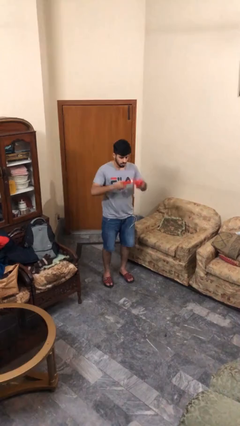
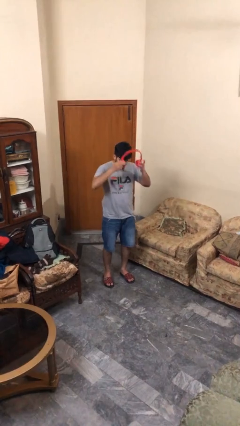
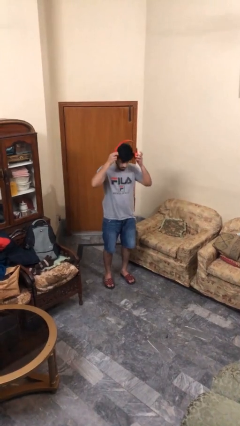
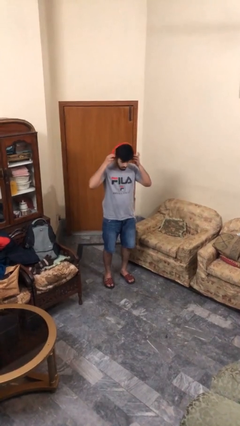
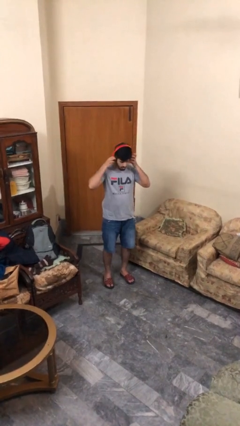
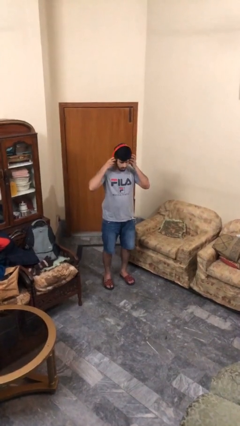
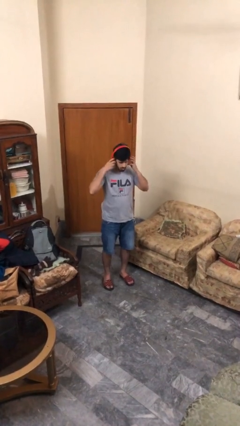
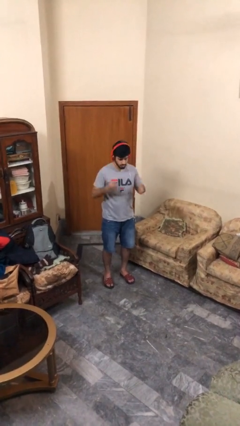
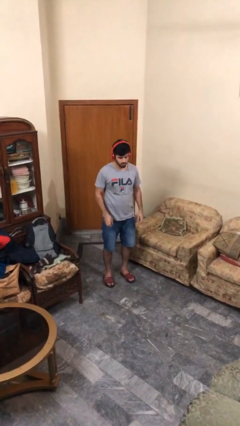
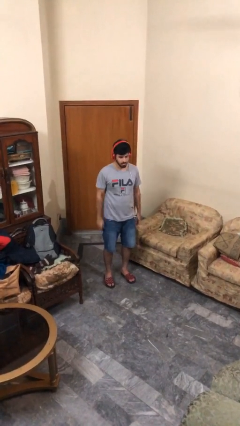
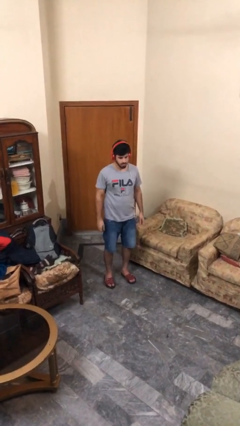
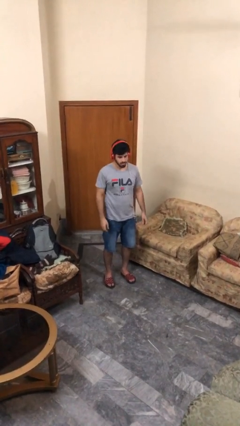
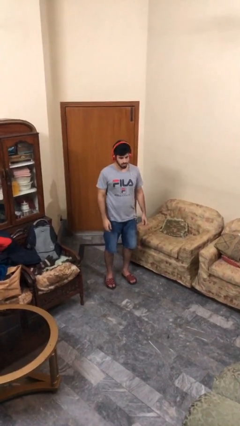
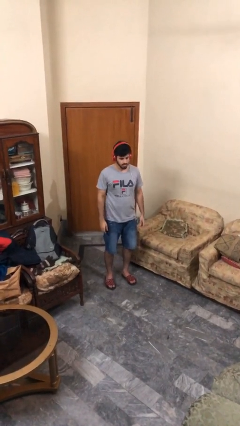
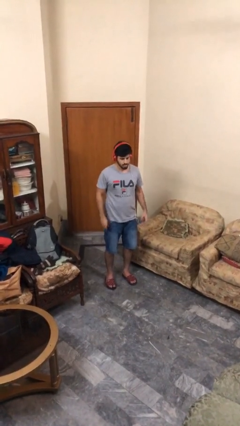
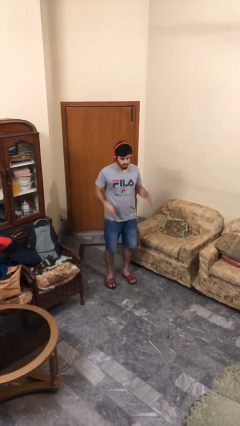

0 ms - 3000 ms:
person puts on headphones

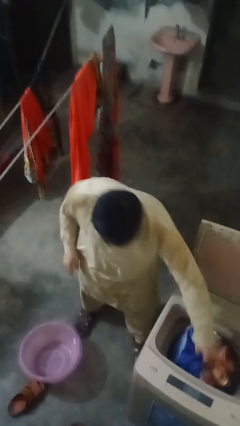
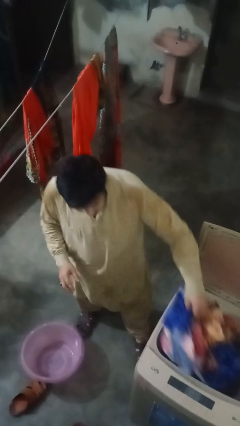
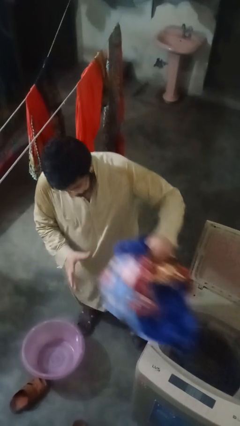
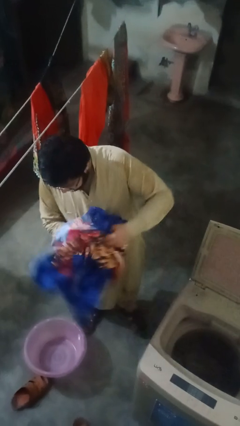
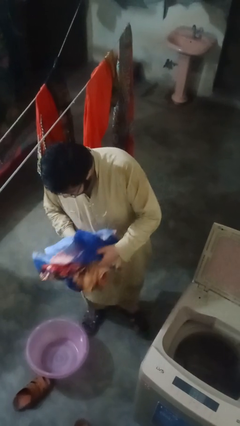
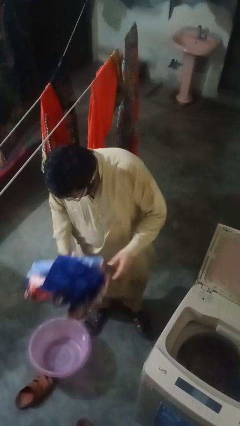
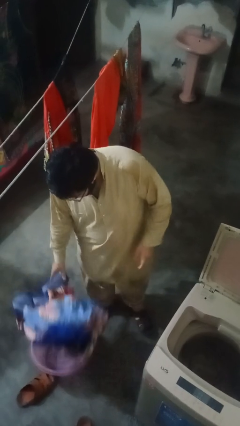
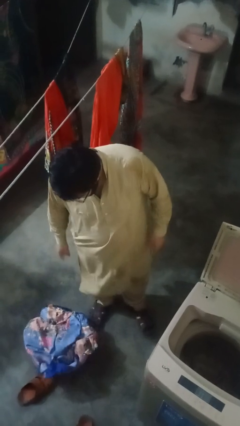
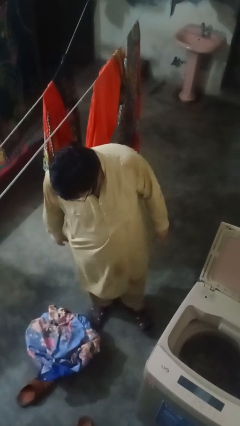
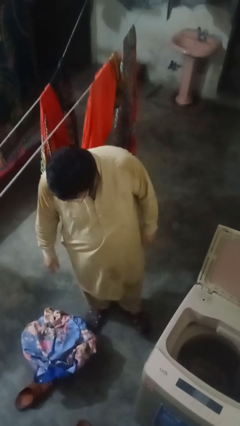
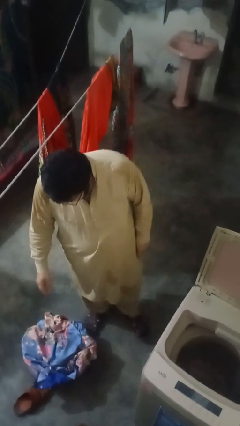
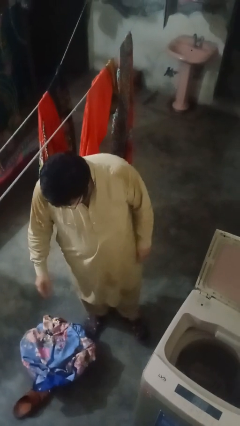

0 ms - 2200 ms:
person loads clotheswasher

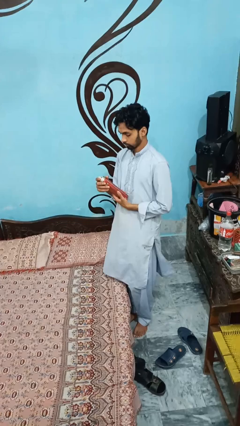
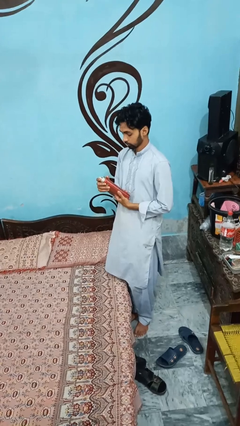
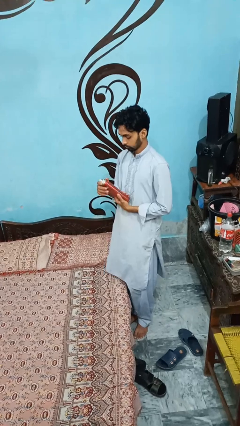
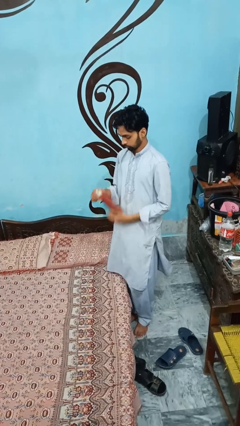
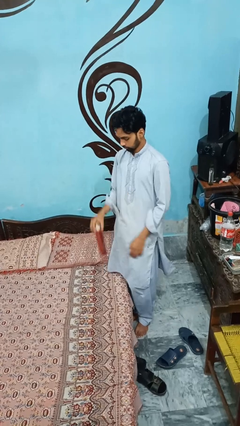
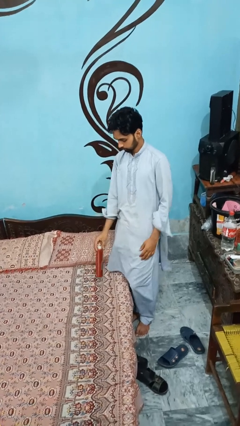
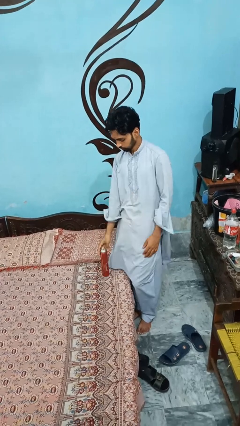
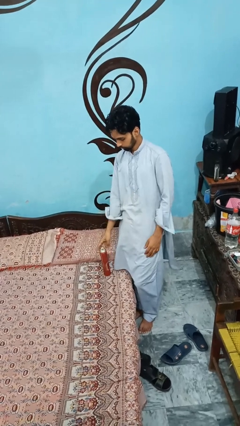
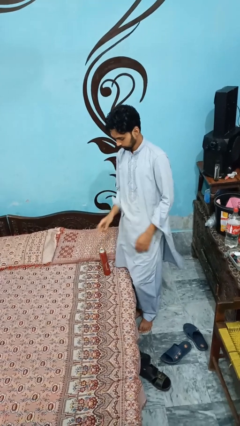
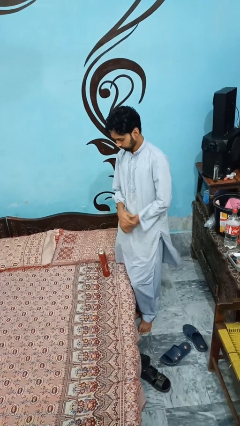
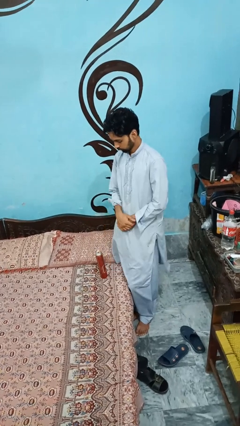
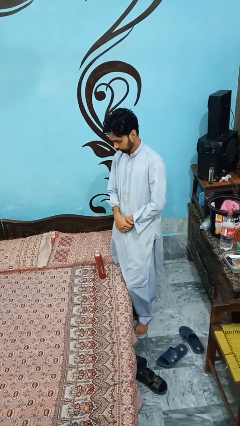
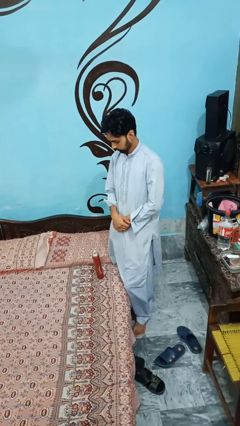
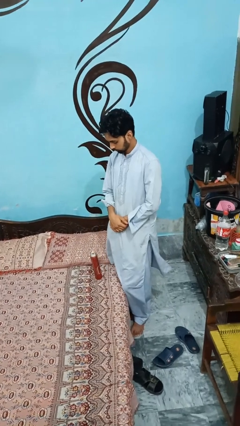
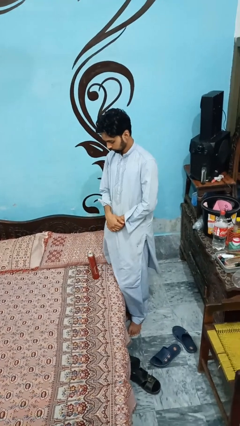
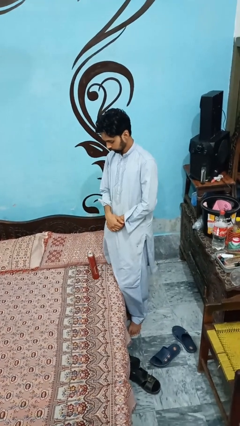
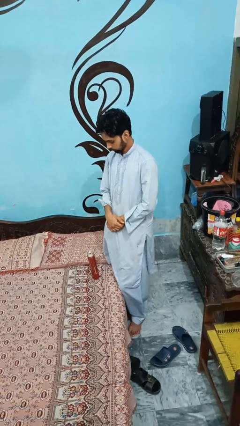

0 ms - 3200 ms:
person puts down object on bed

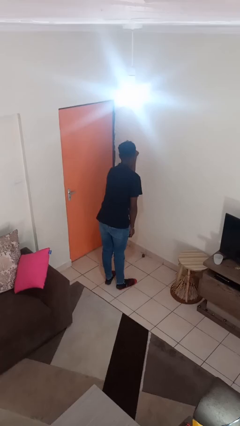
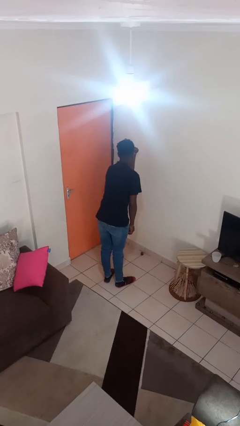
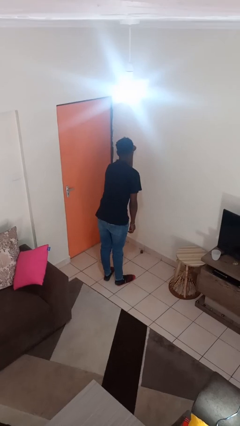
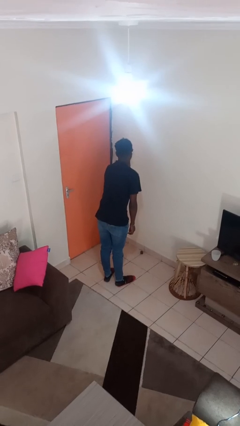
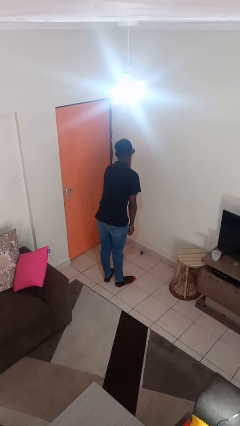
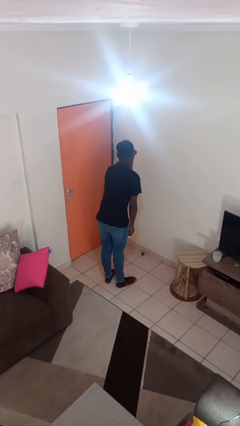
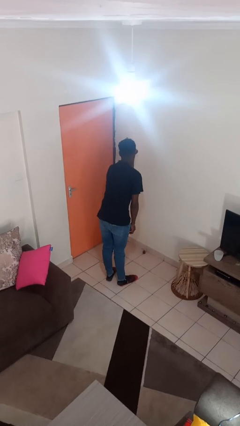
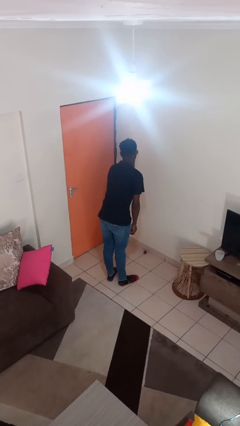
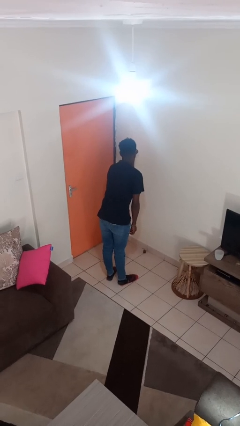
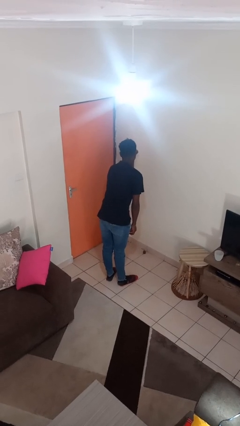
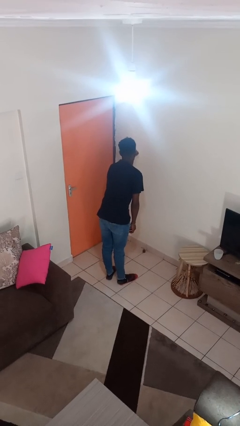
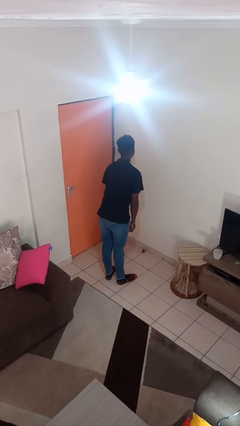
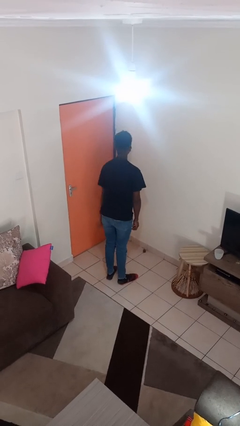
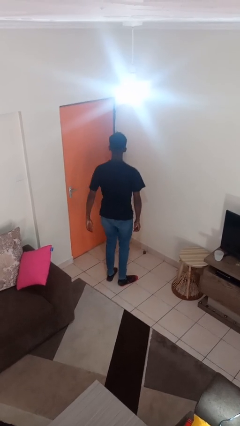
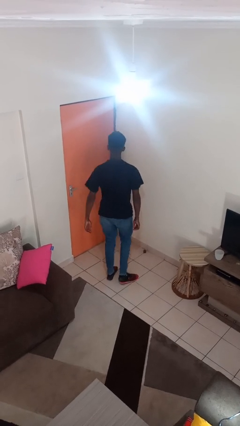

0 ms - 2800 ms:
person gestures watch closely

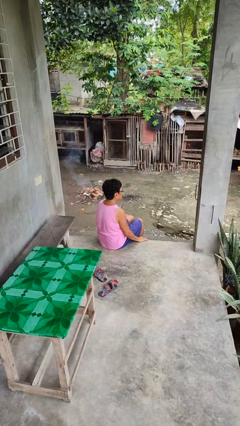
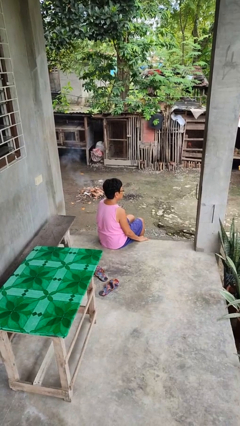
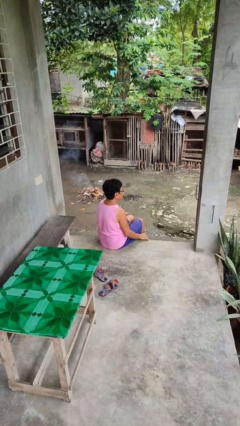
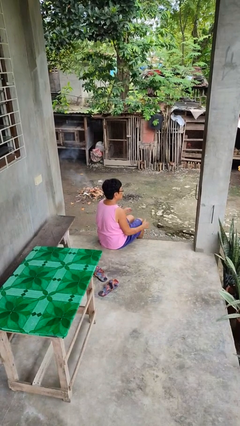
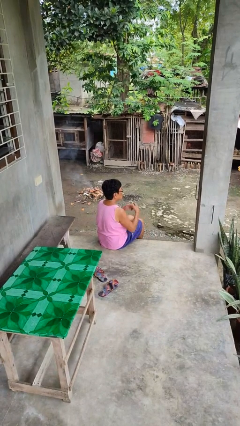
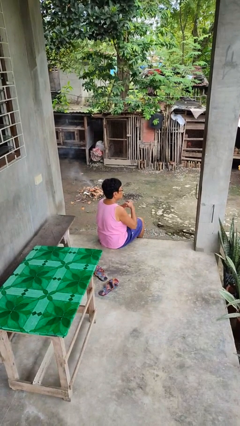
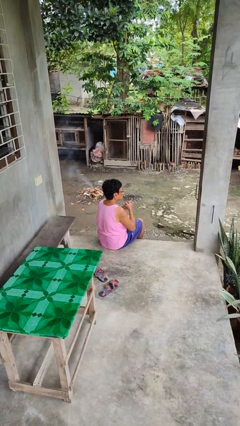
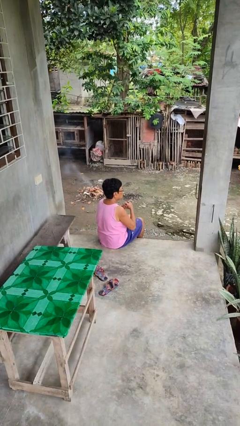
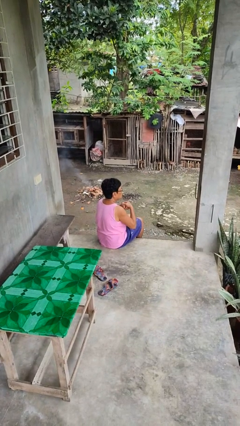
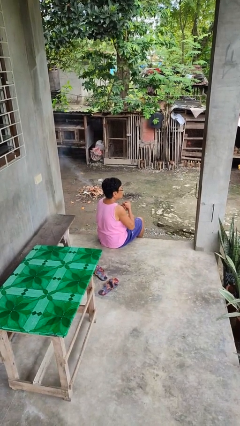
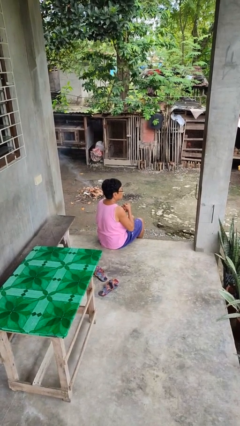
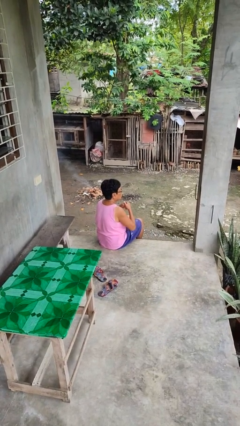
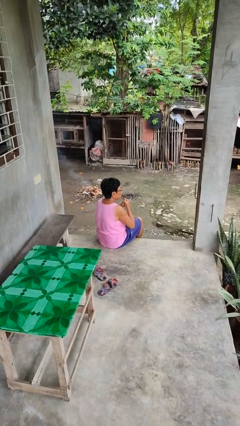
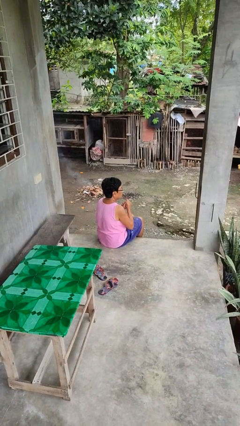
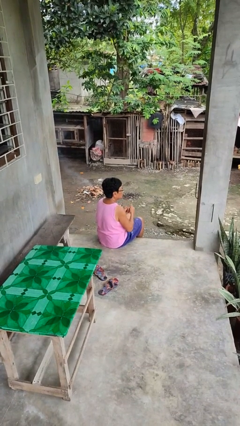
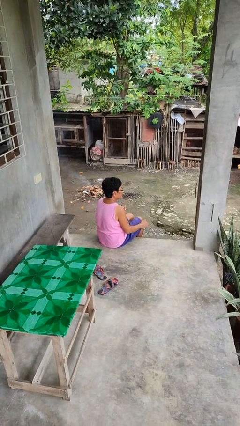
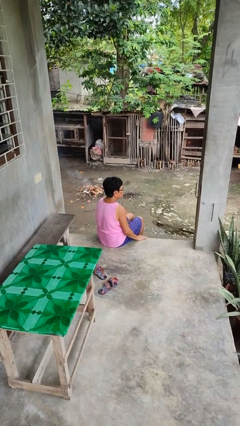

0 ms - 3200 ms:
person cracks knuckles

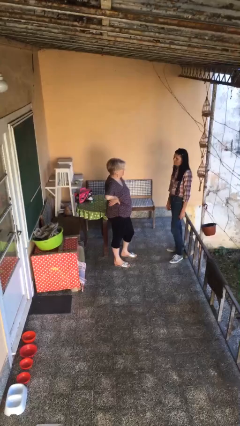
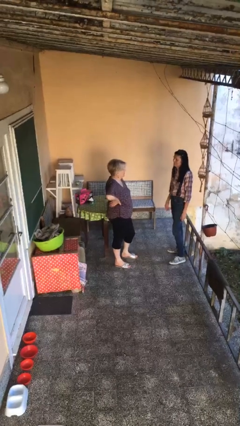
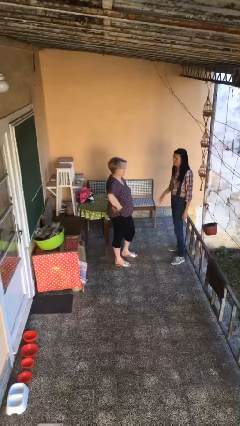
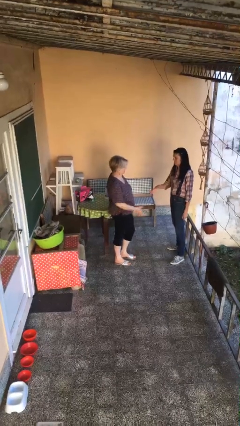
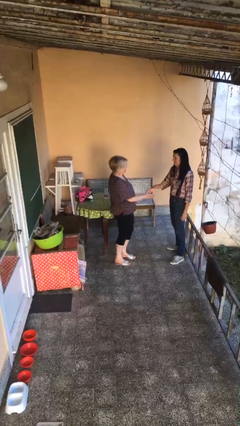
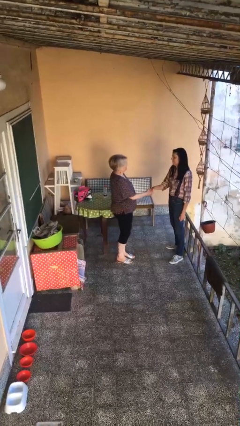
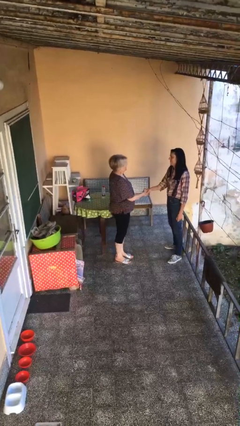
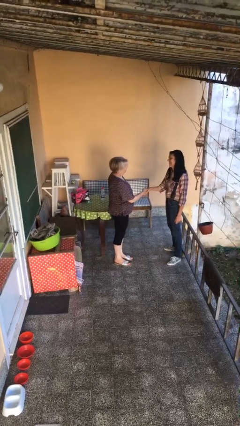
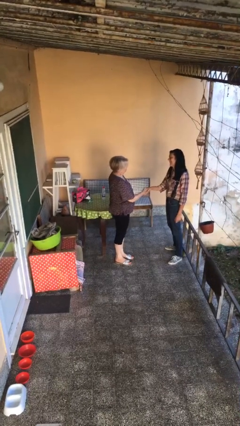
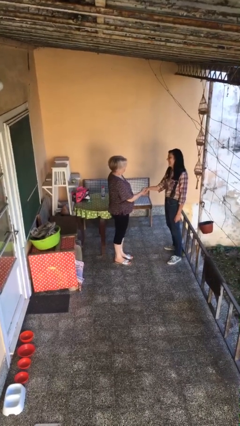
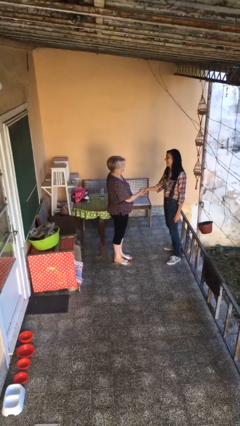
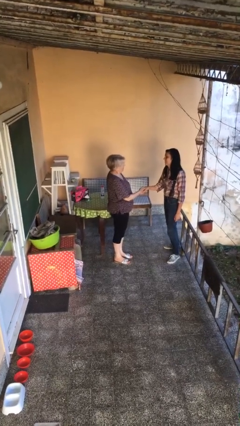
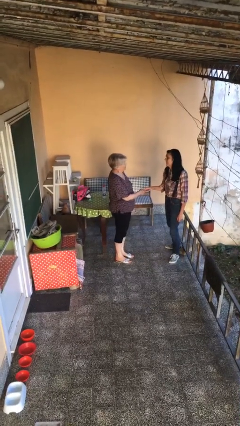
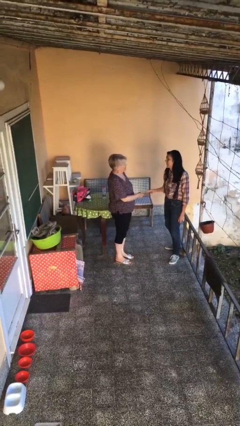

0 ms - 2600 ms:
person shakes hand

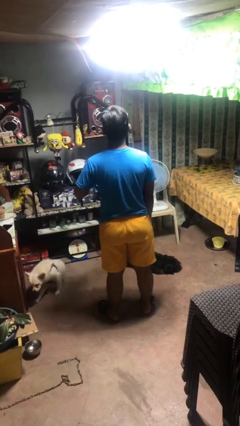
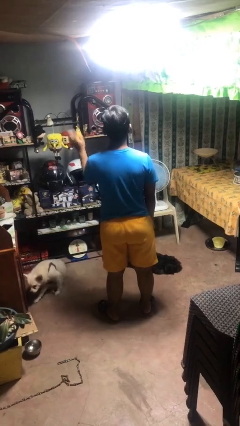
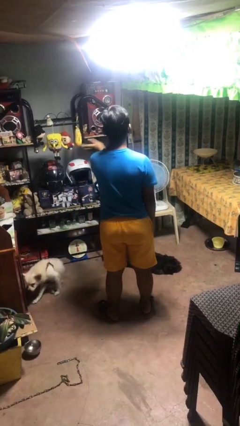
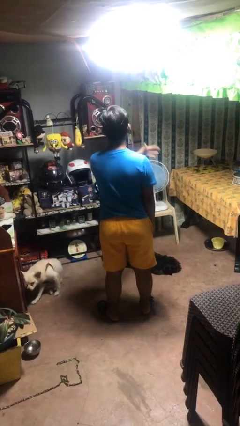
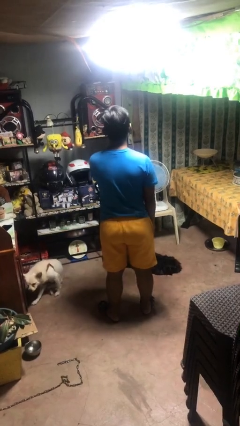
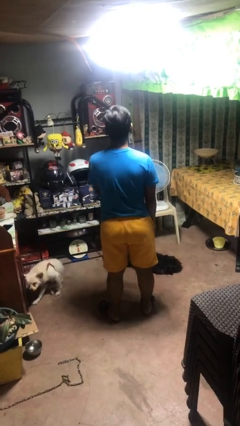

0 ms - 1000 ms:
person gestures swipe right
